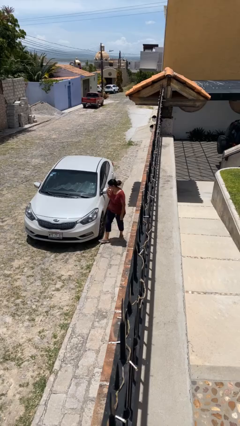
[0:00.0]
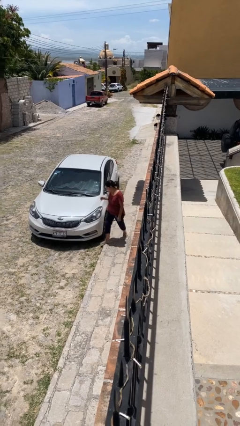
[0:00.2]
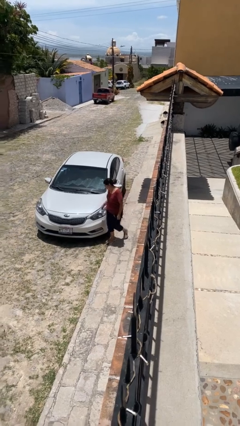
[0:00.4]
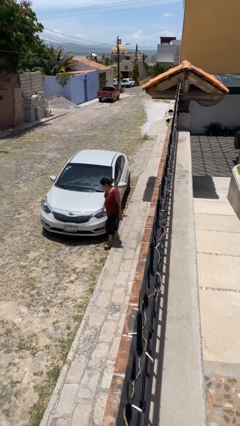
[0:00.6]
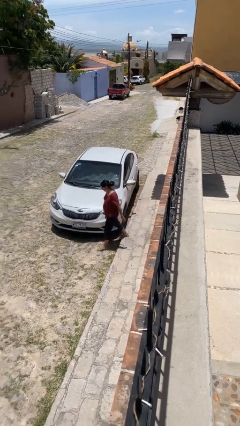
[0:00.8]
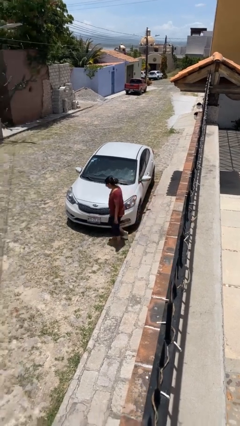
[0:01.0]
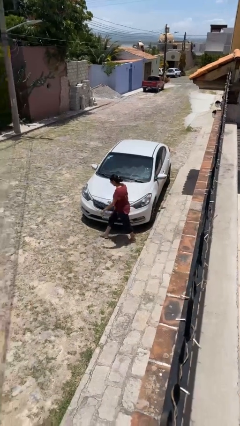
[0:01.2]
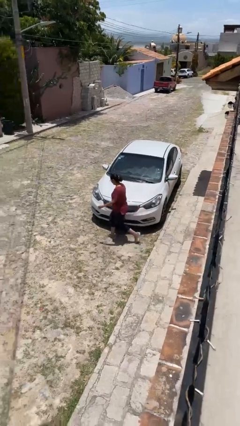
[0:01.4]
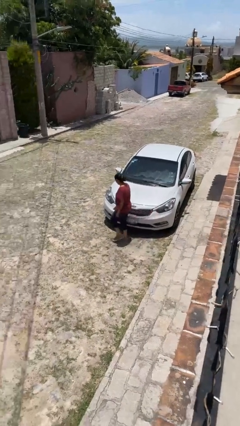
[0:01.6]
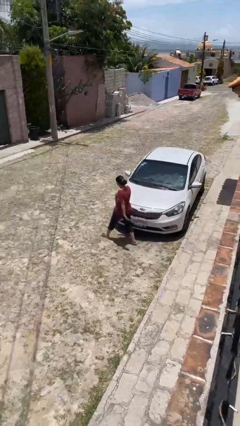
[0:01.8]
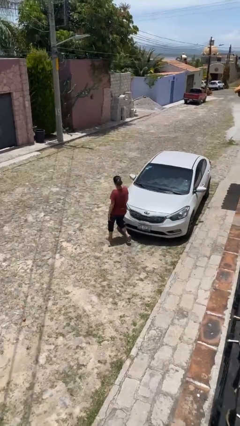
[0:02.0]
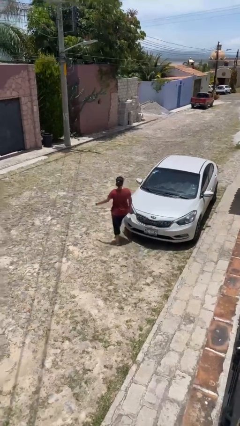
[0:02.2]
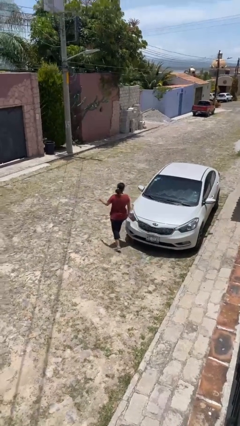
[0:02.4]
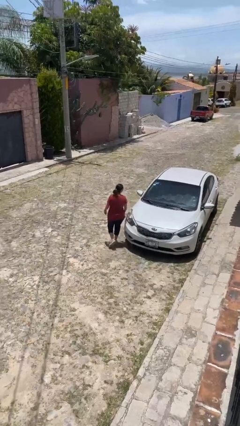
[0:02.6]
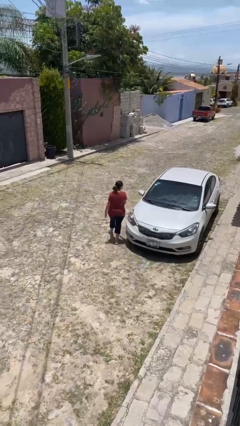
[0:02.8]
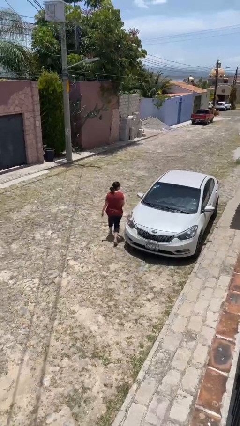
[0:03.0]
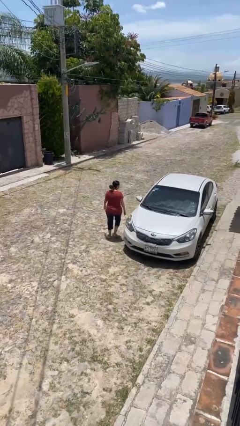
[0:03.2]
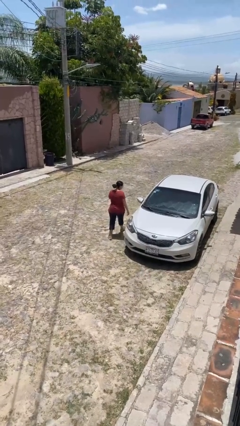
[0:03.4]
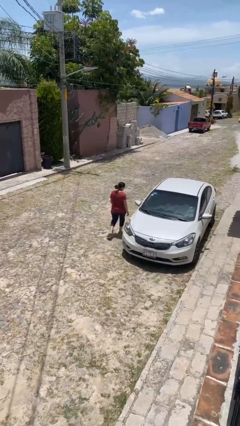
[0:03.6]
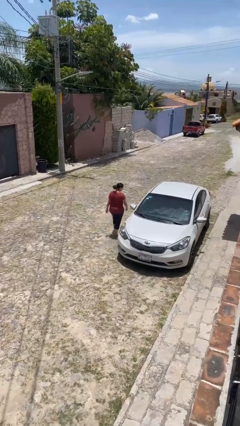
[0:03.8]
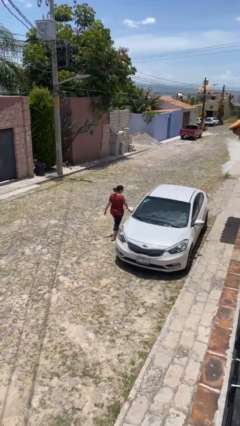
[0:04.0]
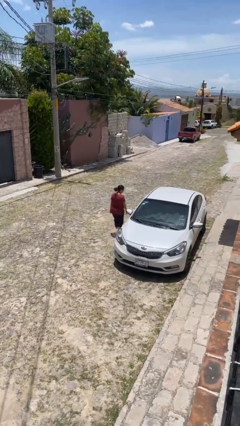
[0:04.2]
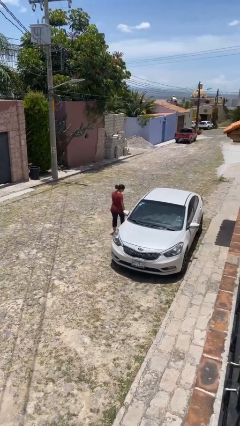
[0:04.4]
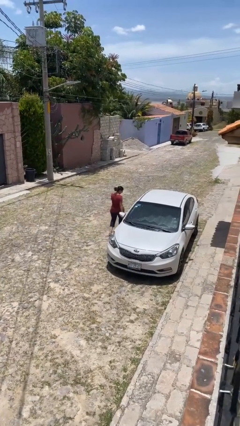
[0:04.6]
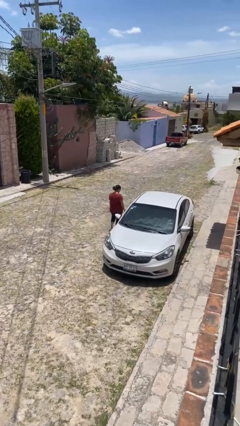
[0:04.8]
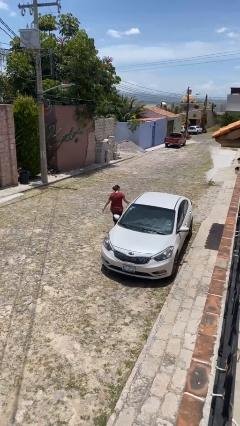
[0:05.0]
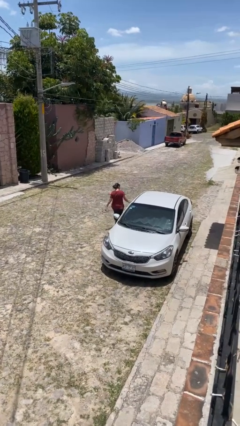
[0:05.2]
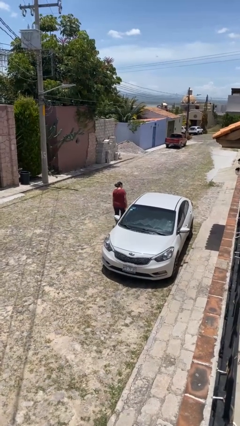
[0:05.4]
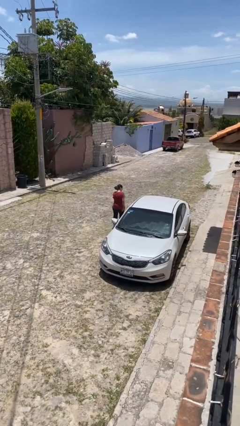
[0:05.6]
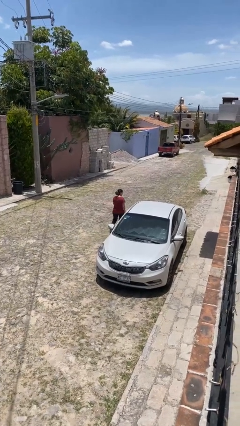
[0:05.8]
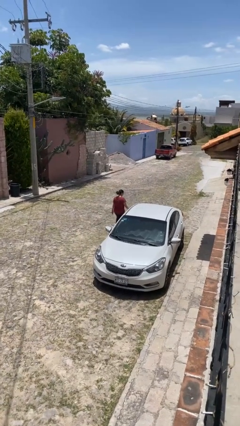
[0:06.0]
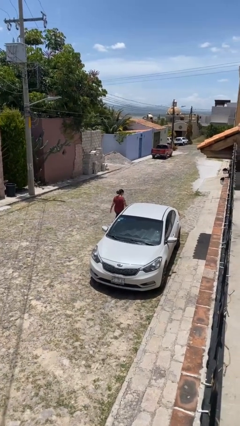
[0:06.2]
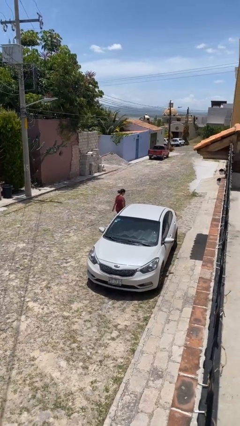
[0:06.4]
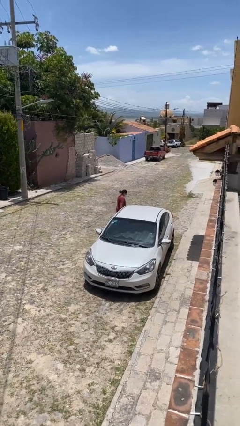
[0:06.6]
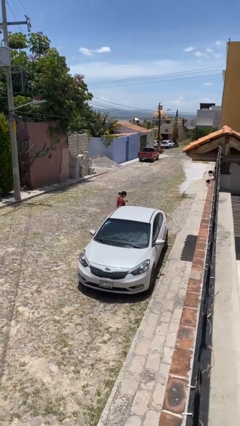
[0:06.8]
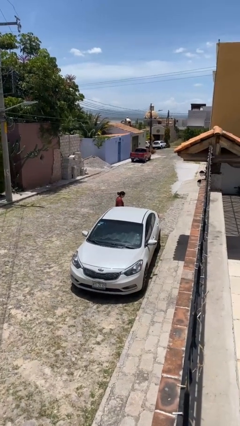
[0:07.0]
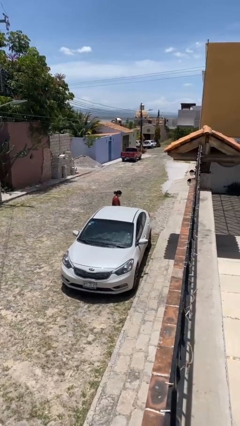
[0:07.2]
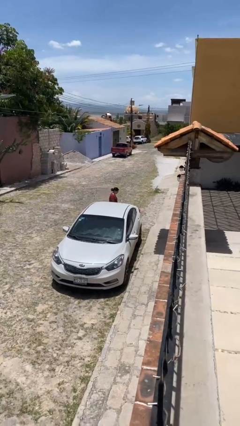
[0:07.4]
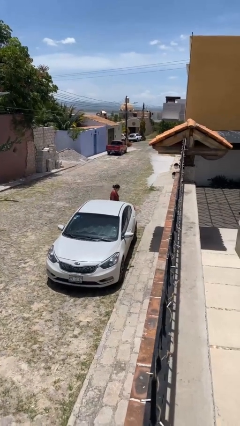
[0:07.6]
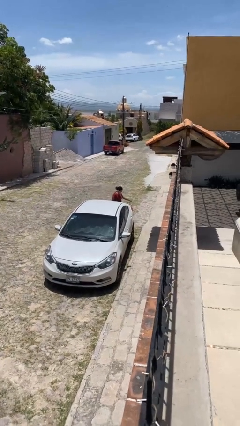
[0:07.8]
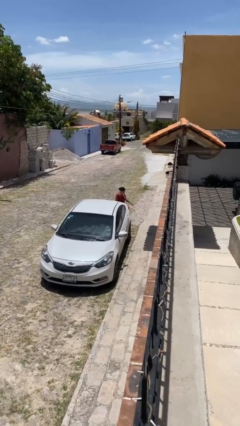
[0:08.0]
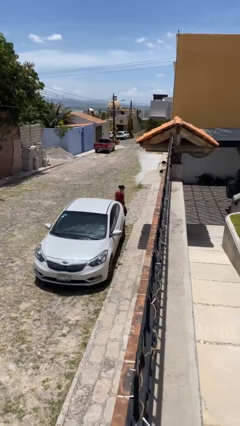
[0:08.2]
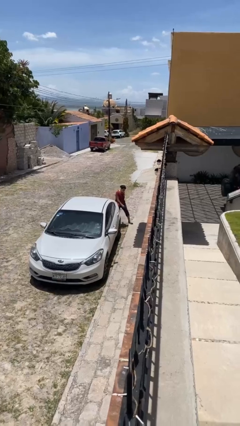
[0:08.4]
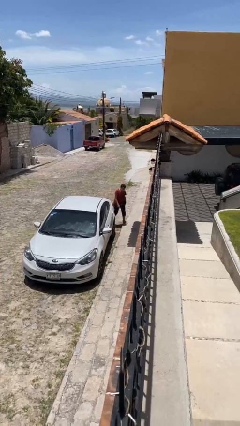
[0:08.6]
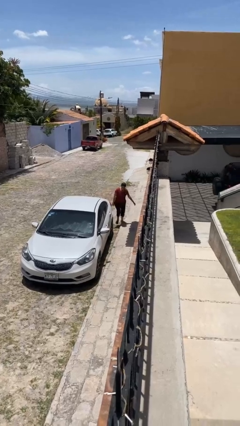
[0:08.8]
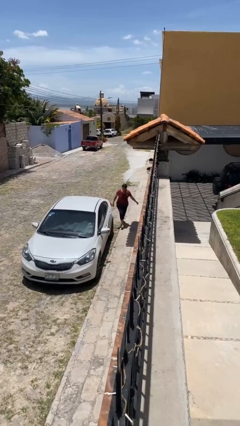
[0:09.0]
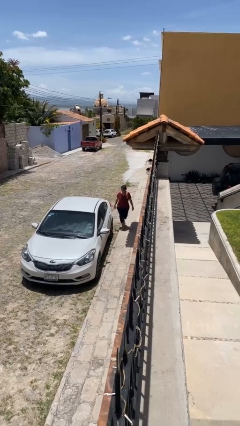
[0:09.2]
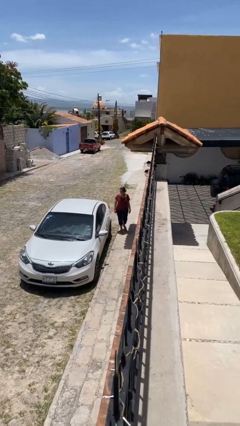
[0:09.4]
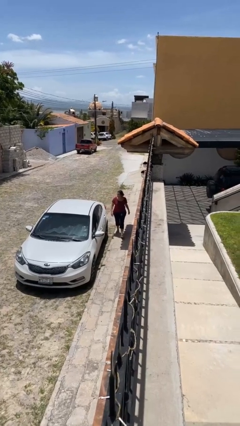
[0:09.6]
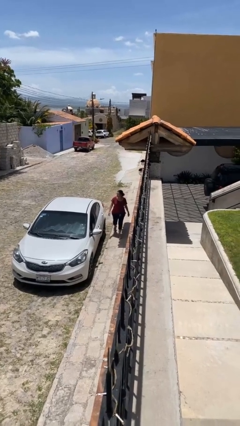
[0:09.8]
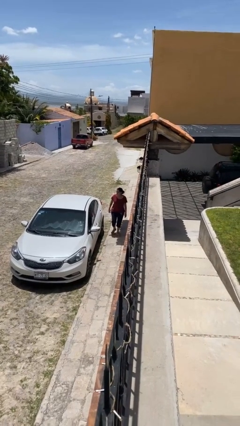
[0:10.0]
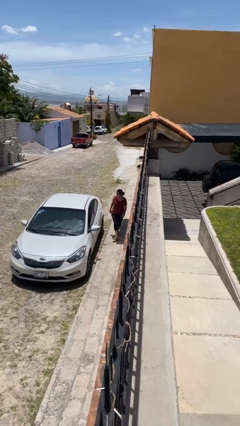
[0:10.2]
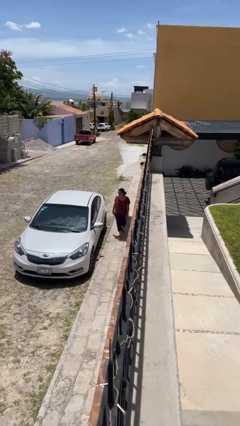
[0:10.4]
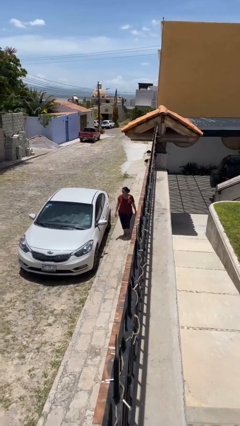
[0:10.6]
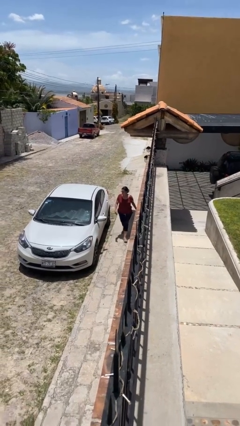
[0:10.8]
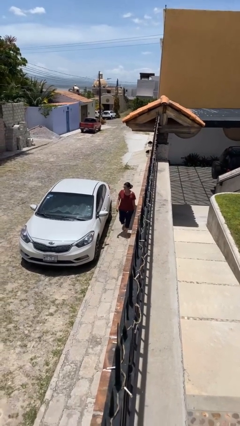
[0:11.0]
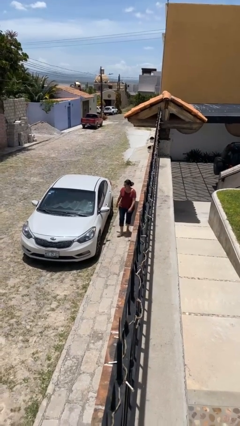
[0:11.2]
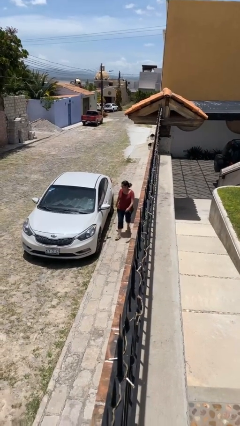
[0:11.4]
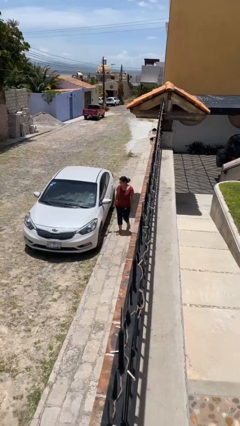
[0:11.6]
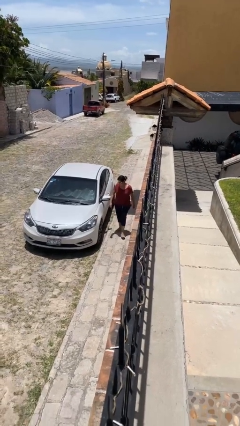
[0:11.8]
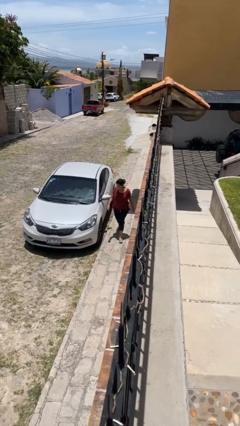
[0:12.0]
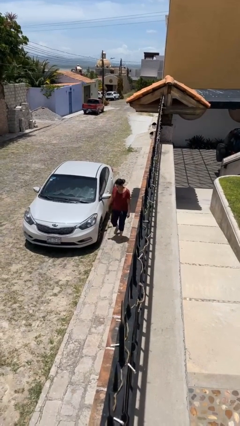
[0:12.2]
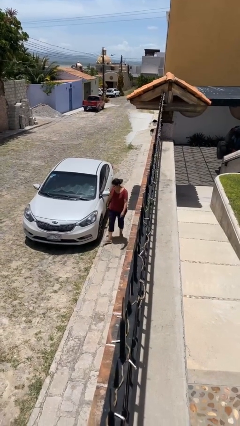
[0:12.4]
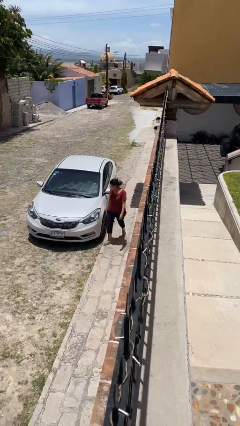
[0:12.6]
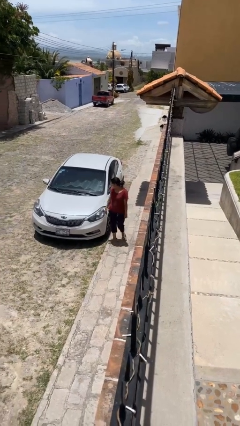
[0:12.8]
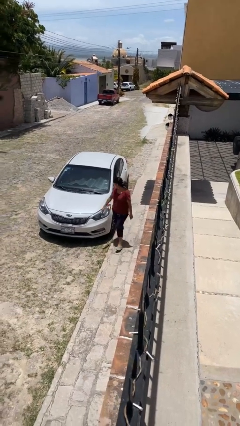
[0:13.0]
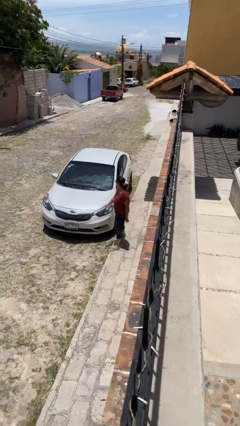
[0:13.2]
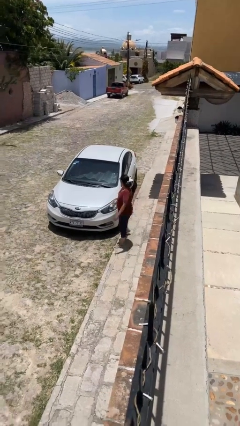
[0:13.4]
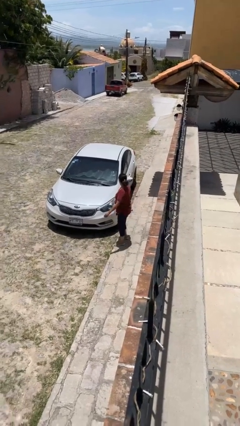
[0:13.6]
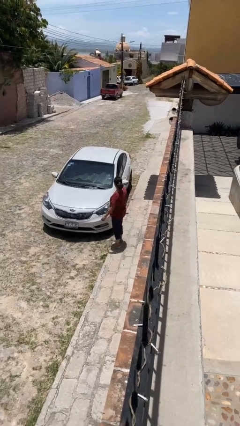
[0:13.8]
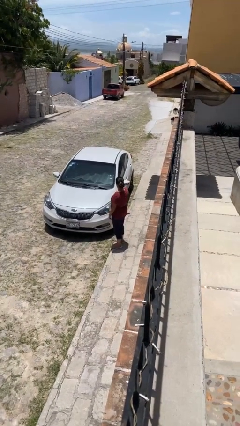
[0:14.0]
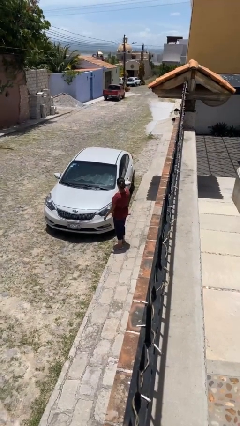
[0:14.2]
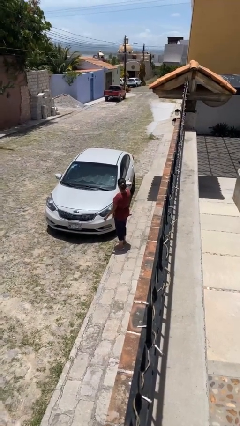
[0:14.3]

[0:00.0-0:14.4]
person walks around car

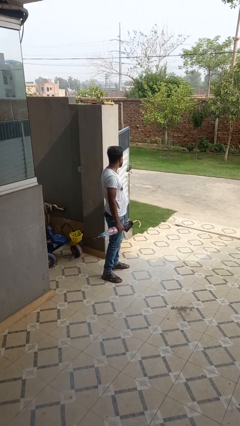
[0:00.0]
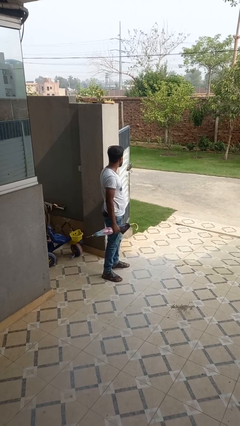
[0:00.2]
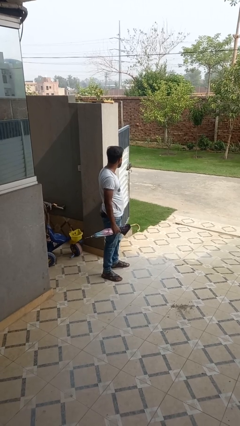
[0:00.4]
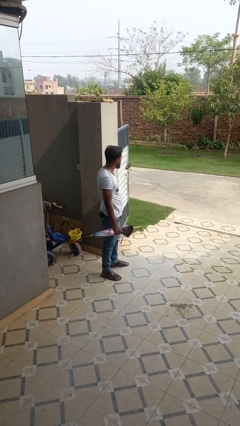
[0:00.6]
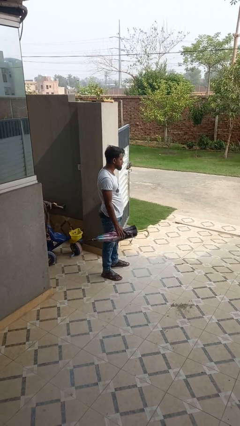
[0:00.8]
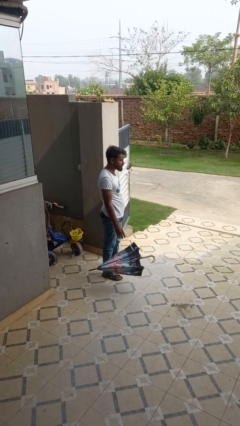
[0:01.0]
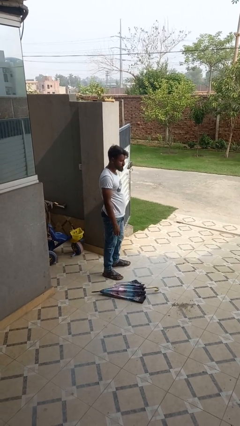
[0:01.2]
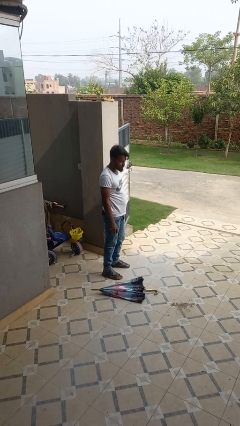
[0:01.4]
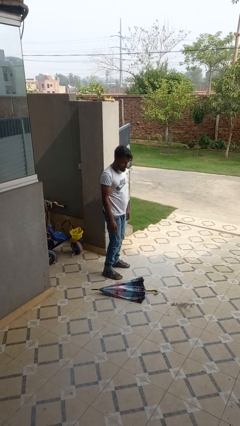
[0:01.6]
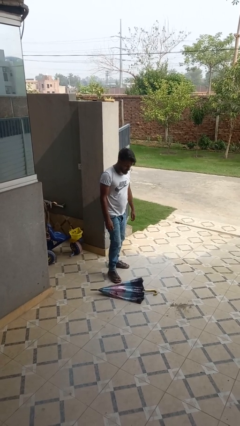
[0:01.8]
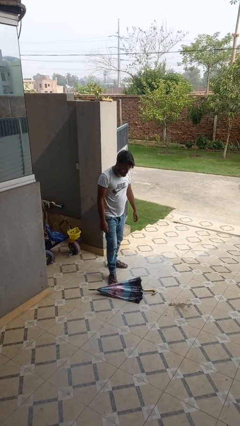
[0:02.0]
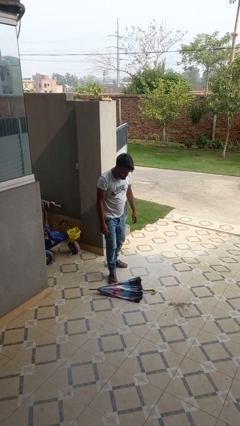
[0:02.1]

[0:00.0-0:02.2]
person drops object

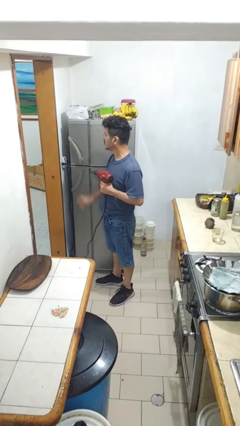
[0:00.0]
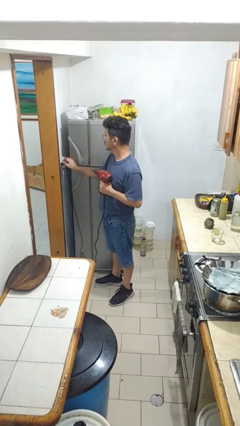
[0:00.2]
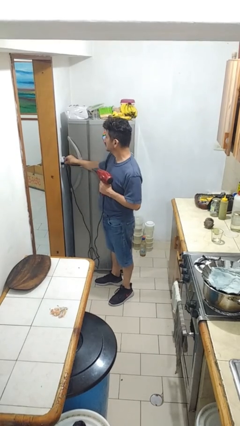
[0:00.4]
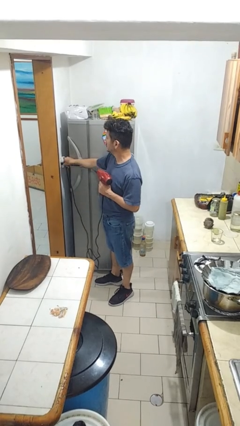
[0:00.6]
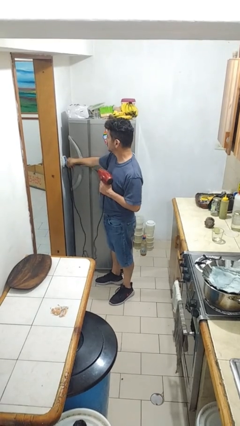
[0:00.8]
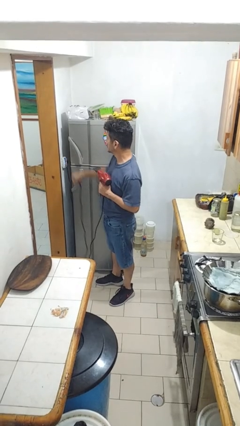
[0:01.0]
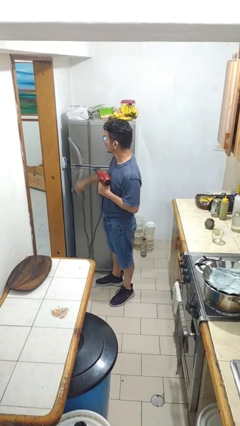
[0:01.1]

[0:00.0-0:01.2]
person unplugs from electrical socket
